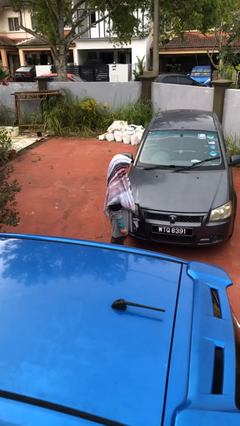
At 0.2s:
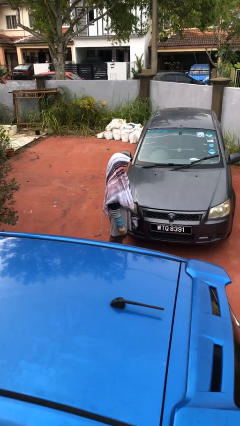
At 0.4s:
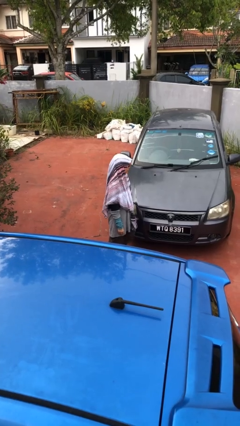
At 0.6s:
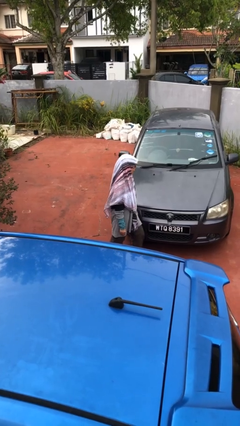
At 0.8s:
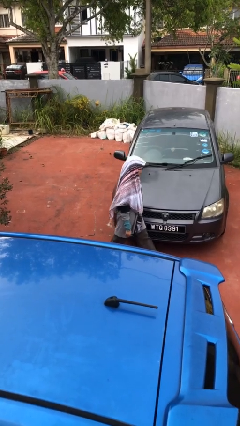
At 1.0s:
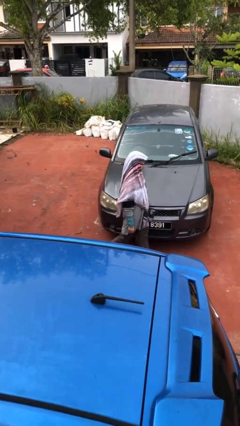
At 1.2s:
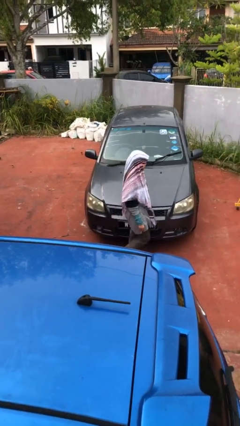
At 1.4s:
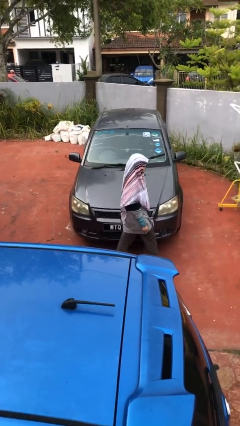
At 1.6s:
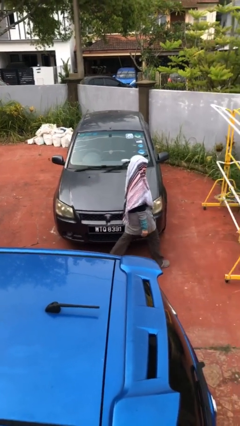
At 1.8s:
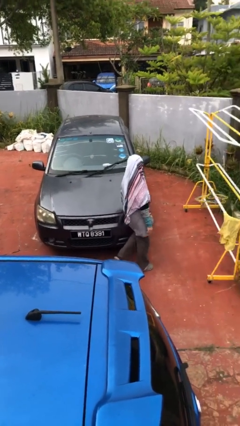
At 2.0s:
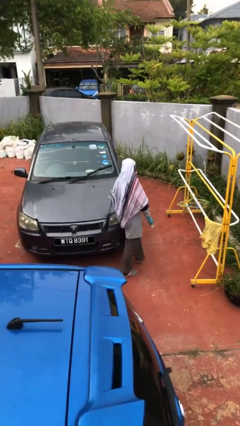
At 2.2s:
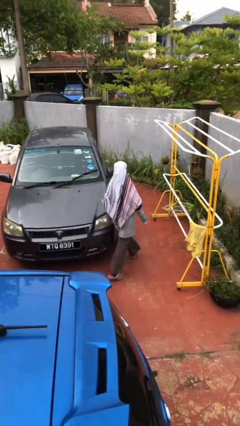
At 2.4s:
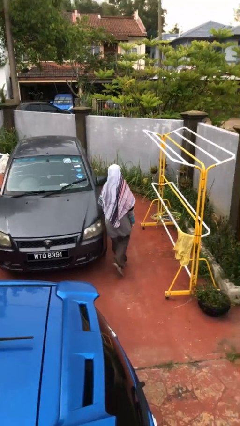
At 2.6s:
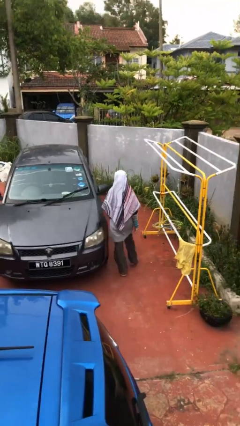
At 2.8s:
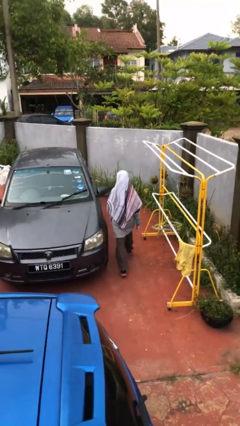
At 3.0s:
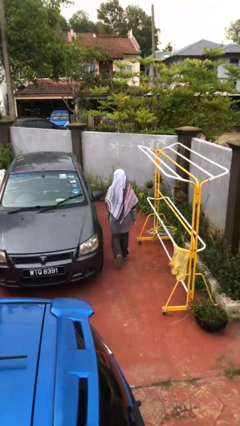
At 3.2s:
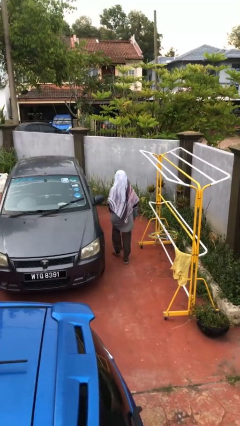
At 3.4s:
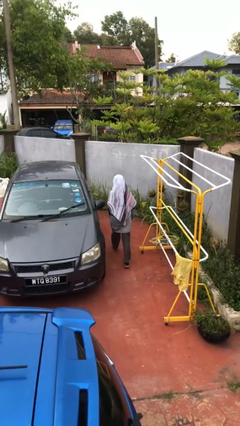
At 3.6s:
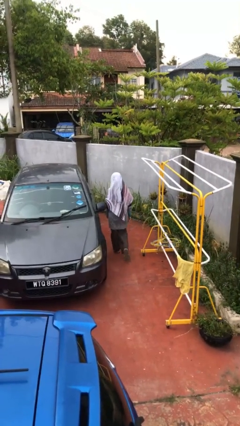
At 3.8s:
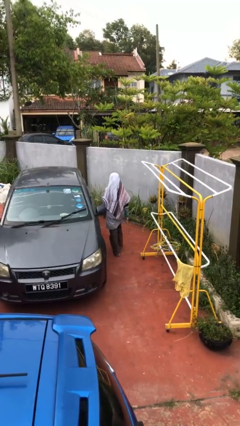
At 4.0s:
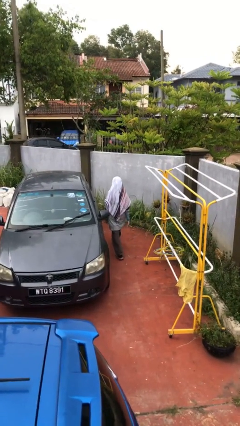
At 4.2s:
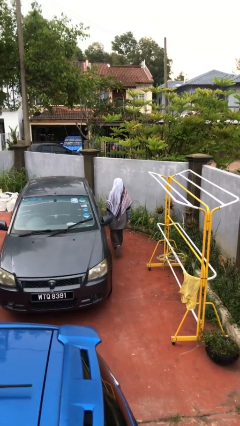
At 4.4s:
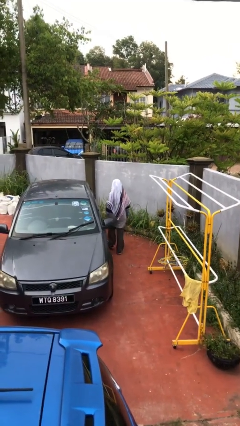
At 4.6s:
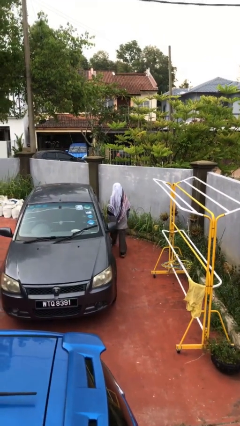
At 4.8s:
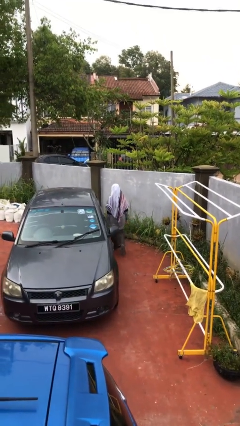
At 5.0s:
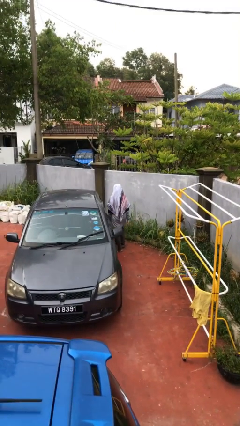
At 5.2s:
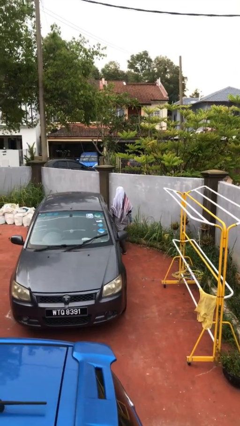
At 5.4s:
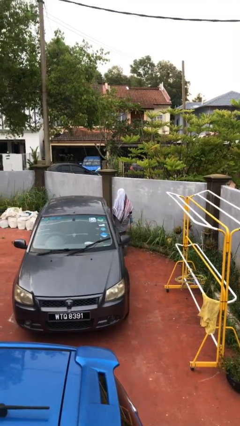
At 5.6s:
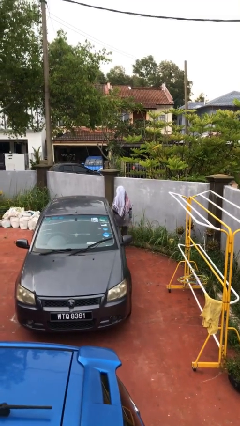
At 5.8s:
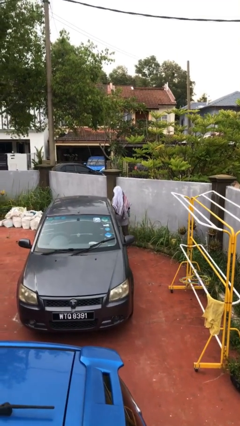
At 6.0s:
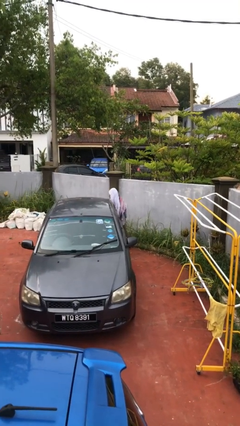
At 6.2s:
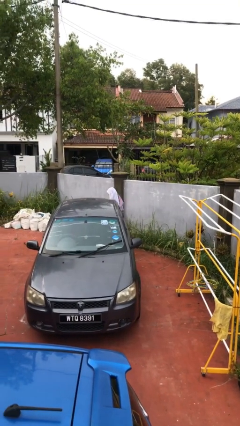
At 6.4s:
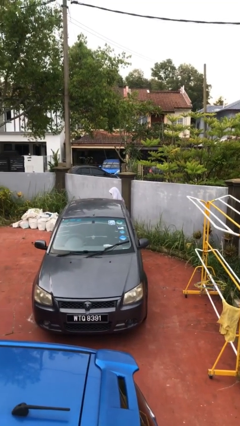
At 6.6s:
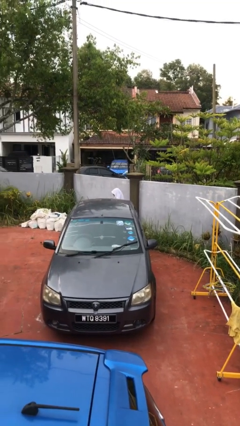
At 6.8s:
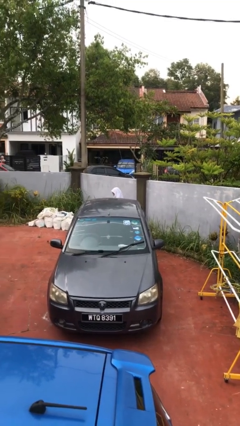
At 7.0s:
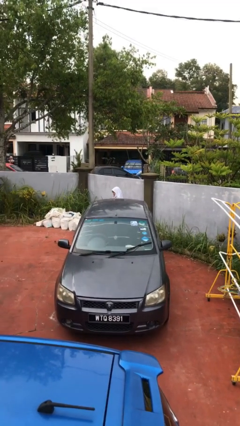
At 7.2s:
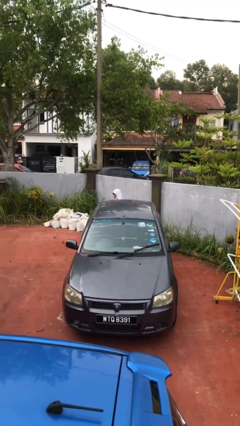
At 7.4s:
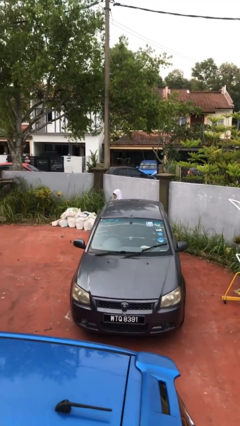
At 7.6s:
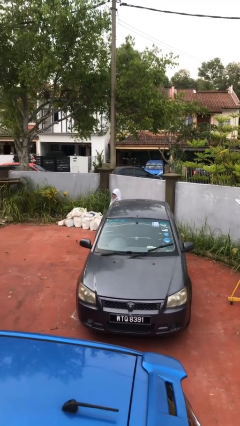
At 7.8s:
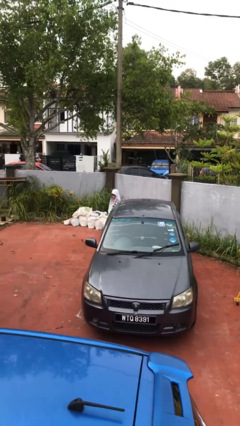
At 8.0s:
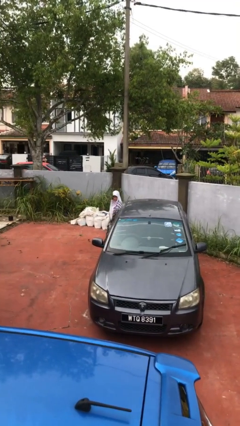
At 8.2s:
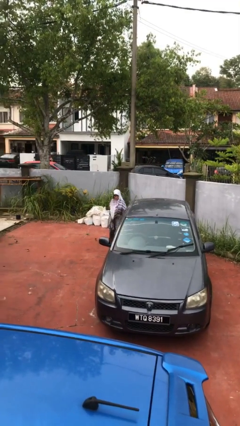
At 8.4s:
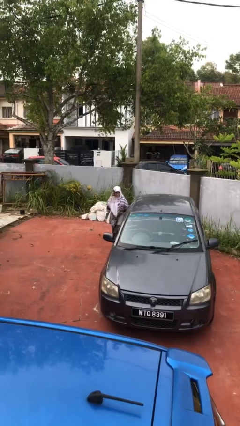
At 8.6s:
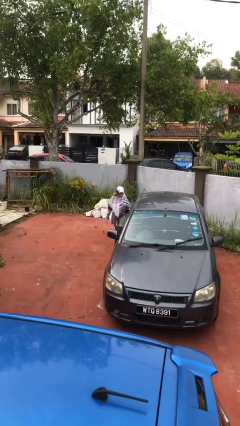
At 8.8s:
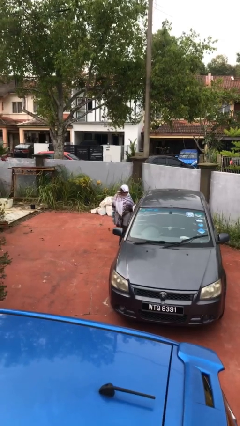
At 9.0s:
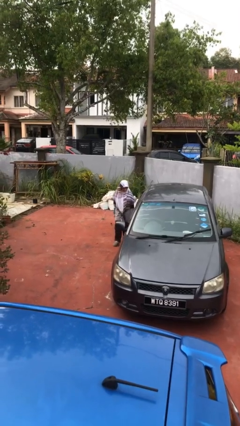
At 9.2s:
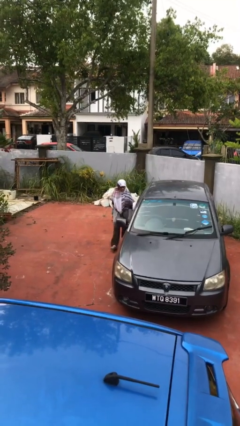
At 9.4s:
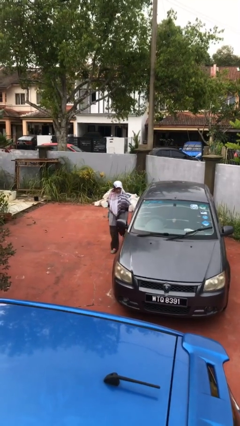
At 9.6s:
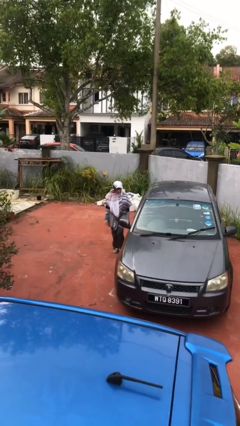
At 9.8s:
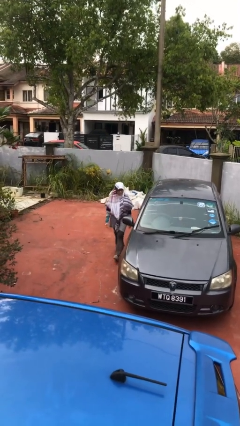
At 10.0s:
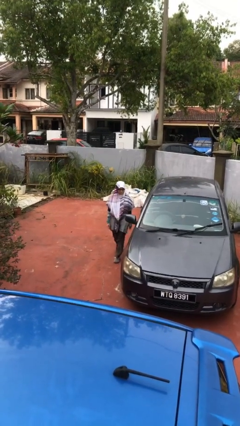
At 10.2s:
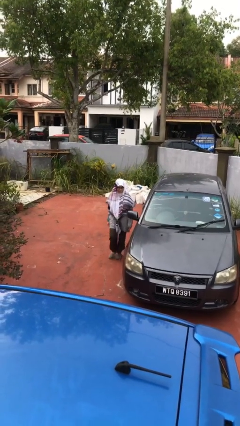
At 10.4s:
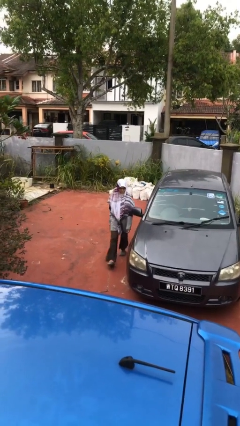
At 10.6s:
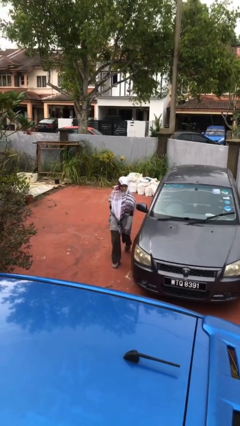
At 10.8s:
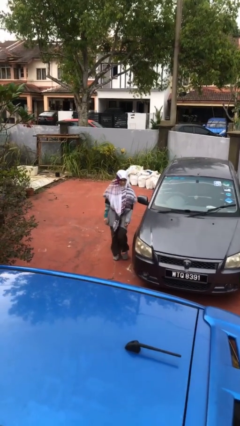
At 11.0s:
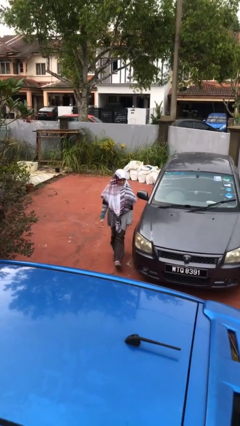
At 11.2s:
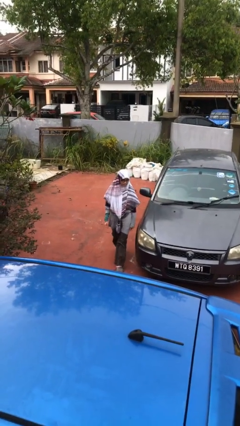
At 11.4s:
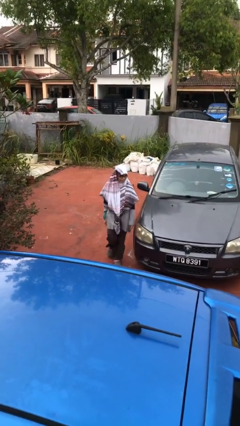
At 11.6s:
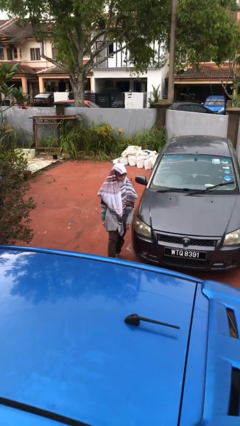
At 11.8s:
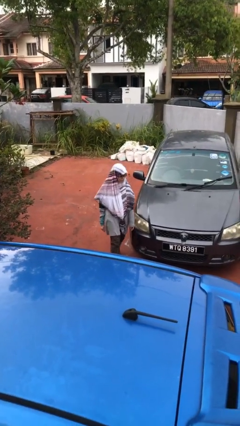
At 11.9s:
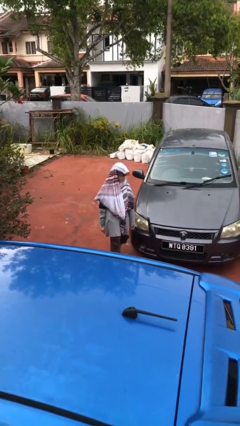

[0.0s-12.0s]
person walks around car

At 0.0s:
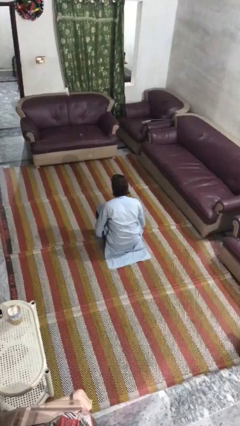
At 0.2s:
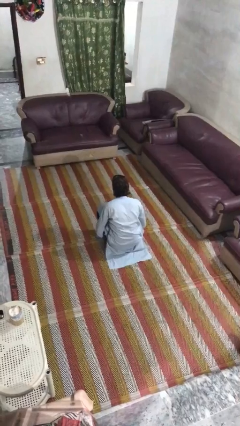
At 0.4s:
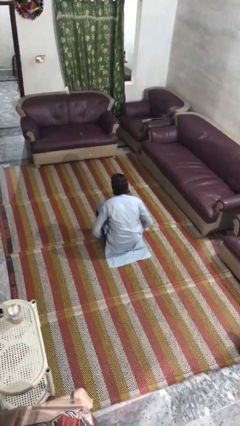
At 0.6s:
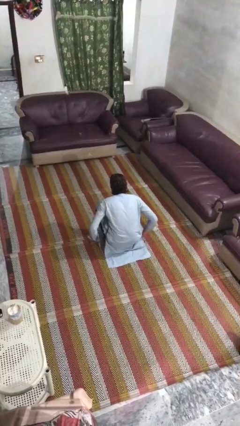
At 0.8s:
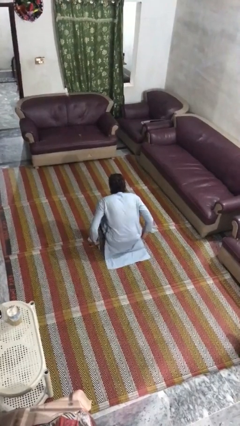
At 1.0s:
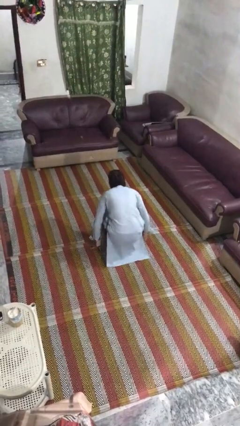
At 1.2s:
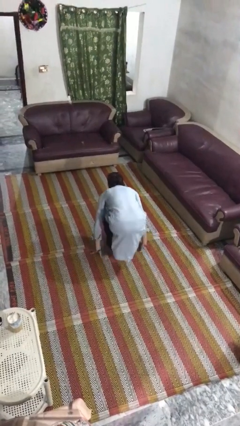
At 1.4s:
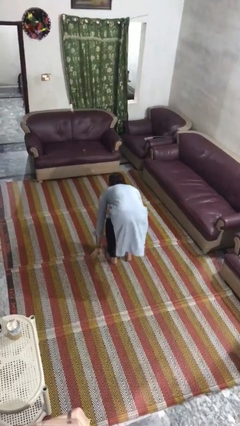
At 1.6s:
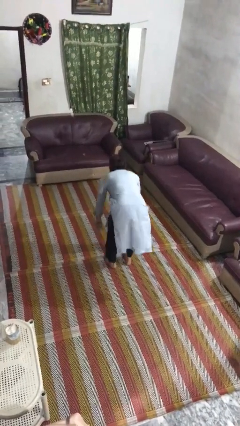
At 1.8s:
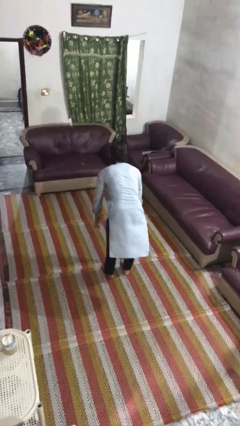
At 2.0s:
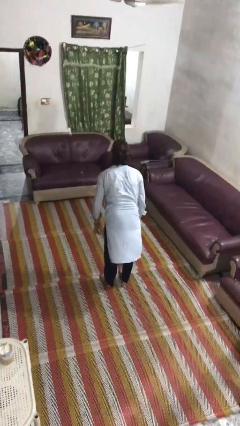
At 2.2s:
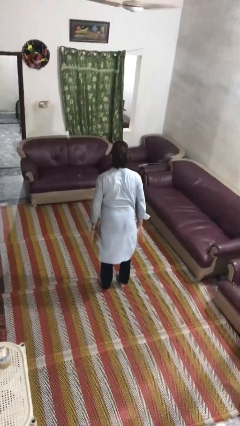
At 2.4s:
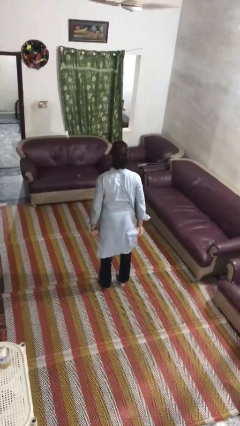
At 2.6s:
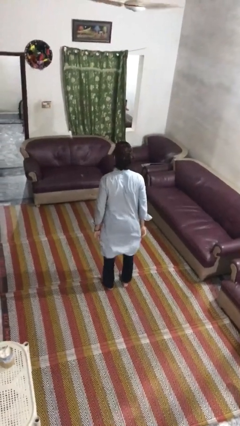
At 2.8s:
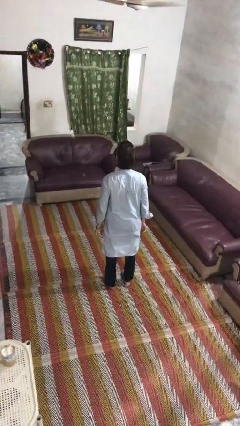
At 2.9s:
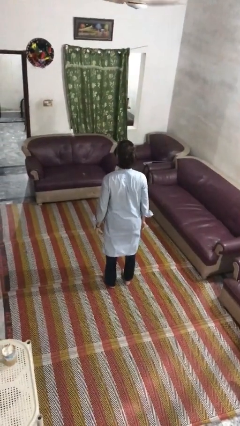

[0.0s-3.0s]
person stands up

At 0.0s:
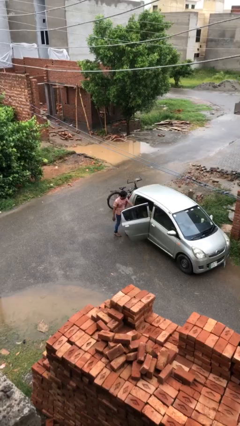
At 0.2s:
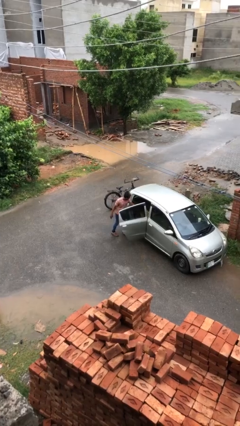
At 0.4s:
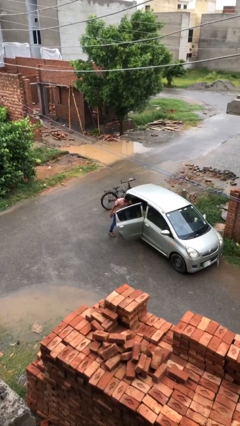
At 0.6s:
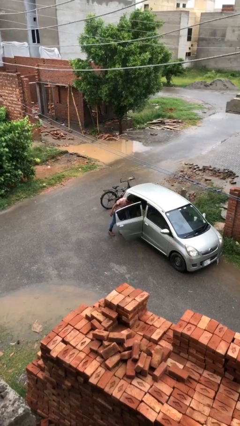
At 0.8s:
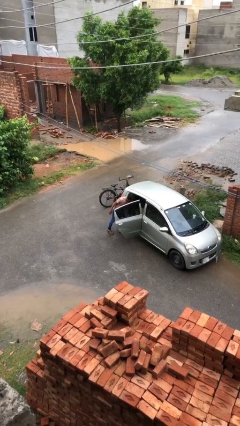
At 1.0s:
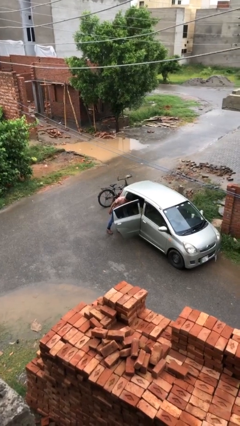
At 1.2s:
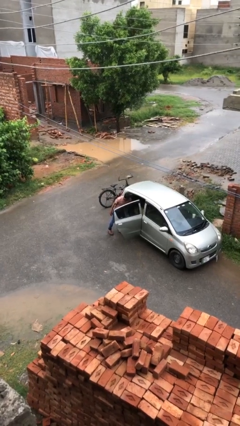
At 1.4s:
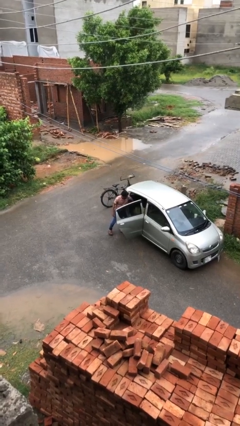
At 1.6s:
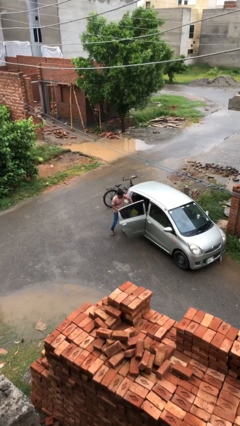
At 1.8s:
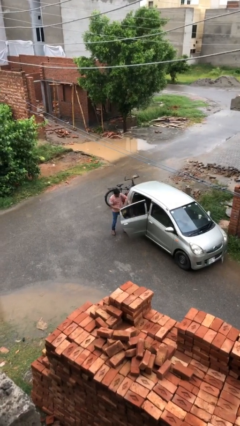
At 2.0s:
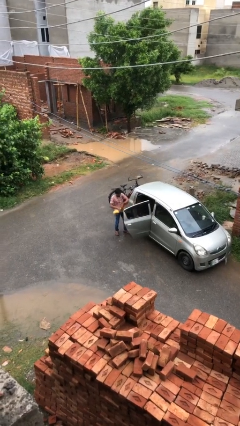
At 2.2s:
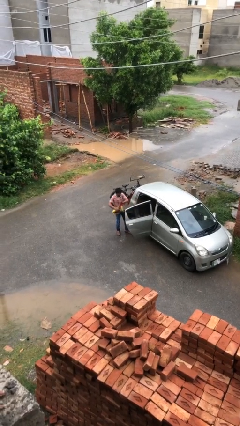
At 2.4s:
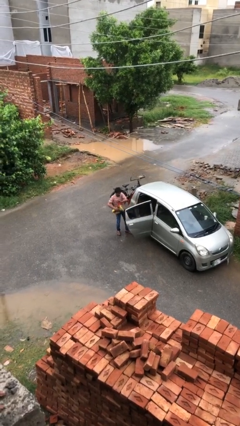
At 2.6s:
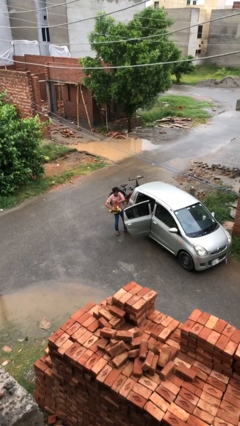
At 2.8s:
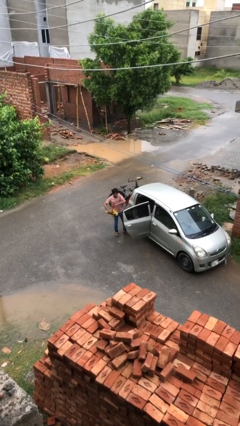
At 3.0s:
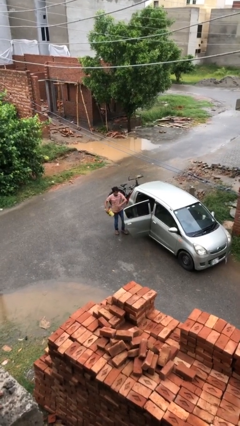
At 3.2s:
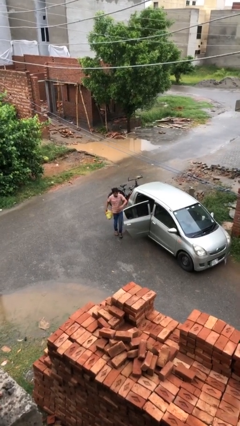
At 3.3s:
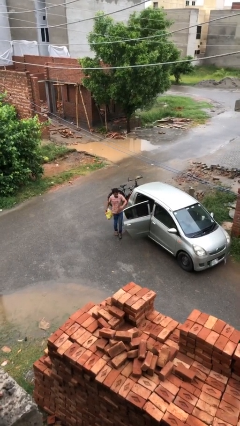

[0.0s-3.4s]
person unloads car
